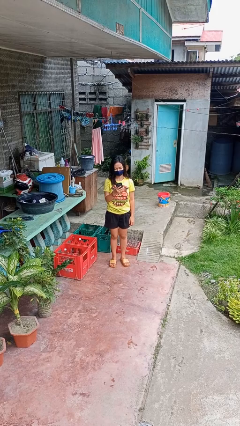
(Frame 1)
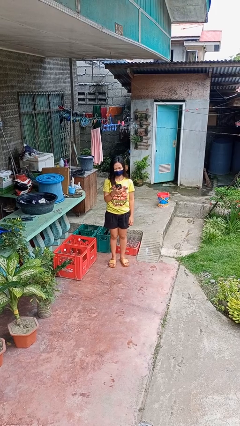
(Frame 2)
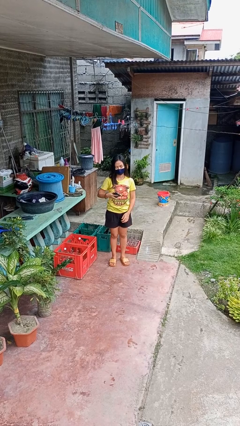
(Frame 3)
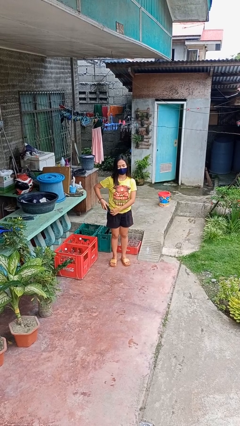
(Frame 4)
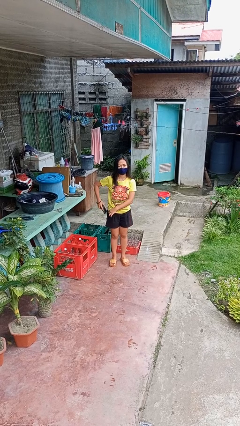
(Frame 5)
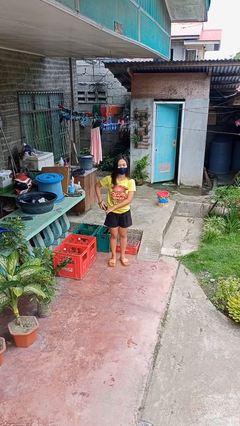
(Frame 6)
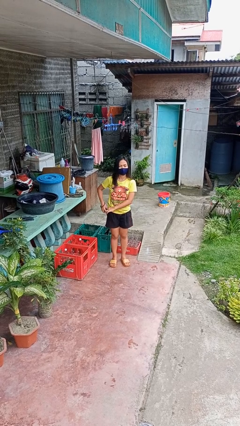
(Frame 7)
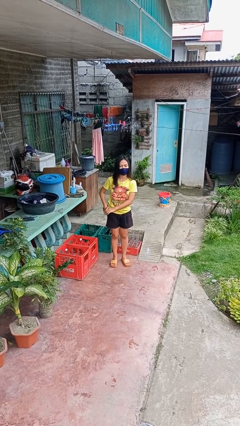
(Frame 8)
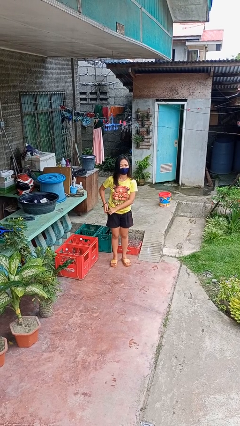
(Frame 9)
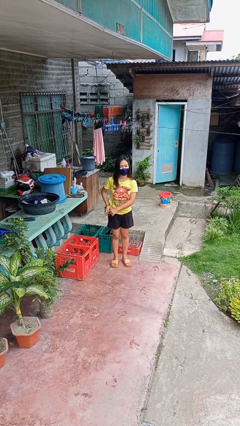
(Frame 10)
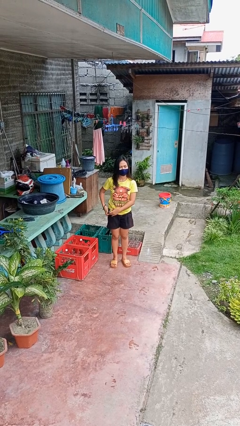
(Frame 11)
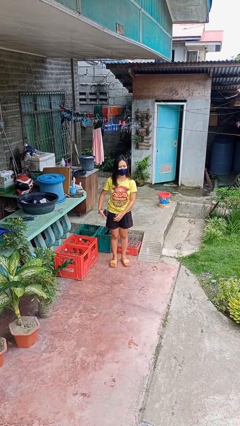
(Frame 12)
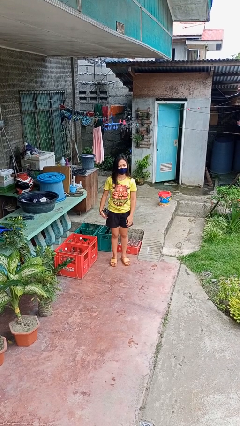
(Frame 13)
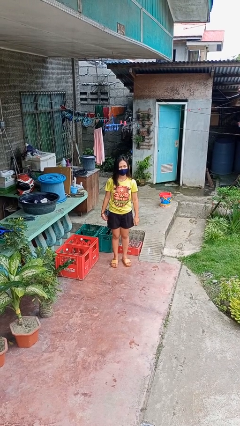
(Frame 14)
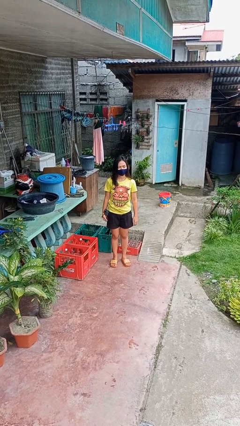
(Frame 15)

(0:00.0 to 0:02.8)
person puts phone into pocket

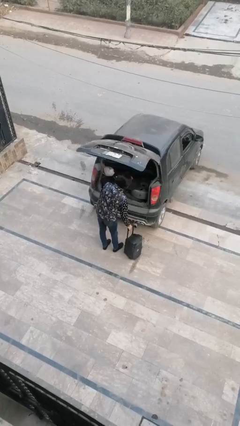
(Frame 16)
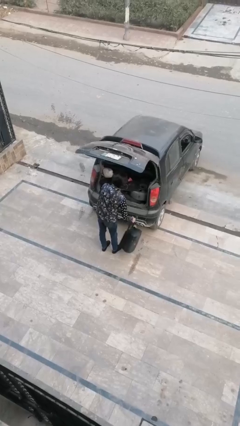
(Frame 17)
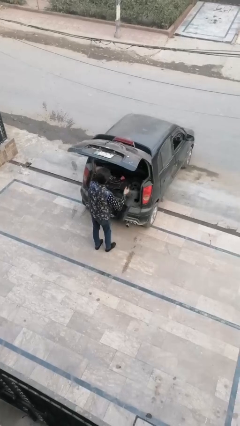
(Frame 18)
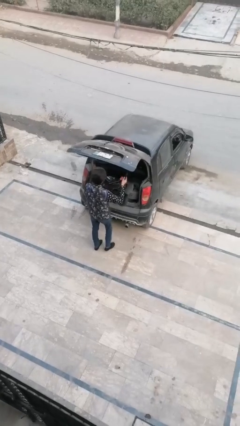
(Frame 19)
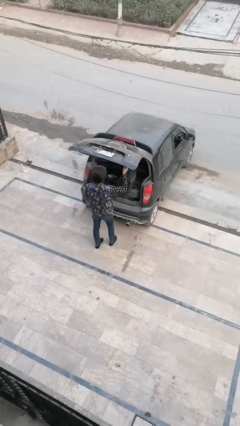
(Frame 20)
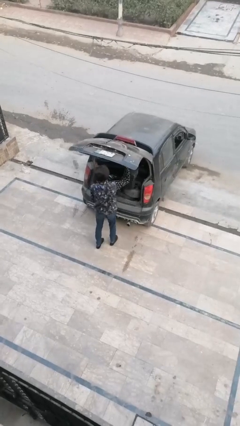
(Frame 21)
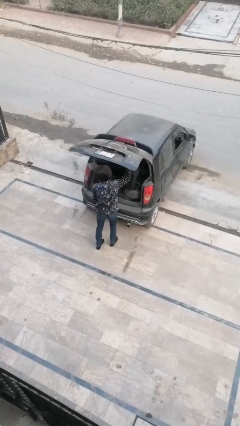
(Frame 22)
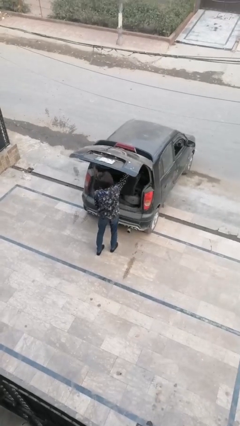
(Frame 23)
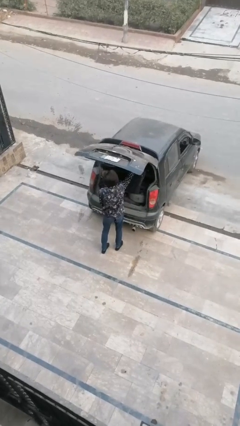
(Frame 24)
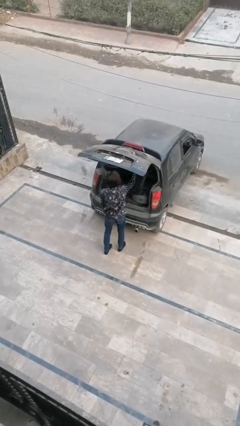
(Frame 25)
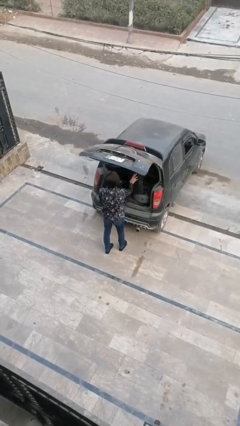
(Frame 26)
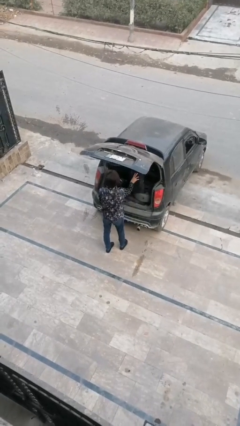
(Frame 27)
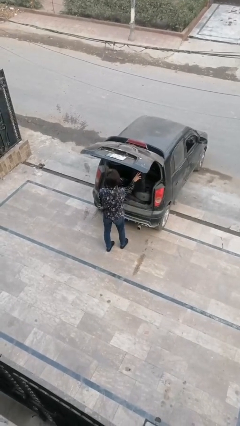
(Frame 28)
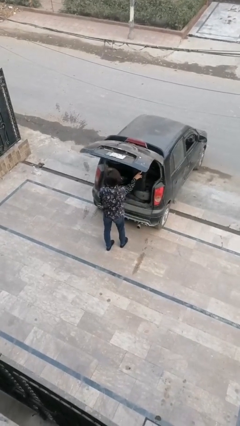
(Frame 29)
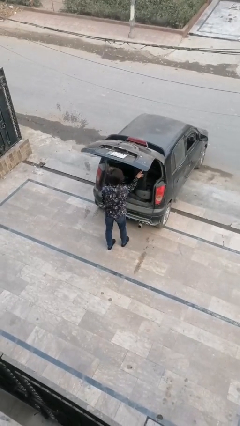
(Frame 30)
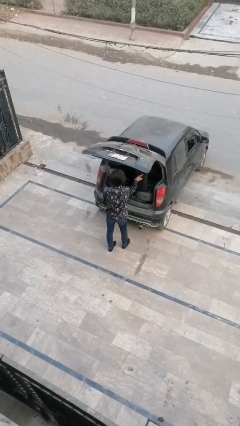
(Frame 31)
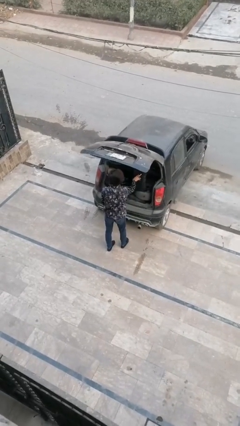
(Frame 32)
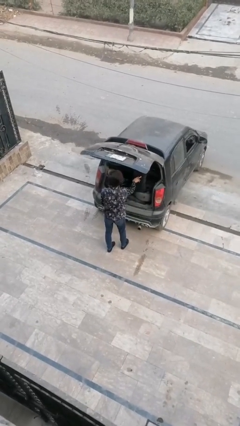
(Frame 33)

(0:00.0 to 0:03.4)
person loads car

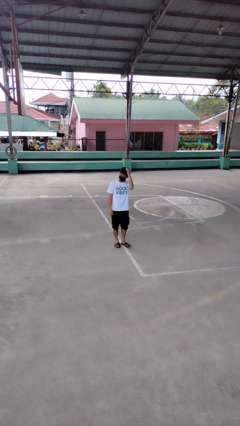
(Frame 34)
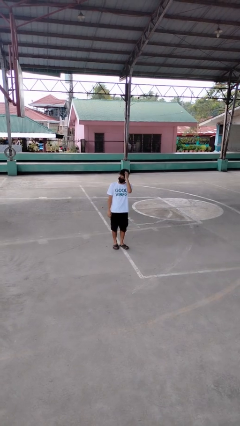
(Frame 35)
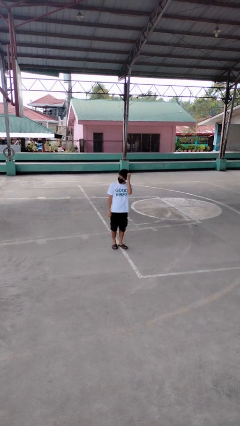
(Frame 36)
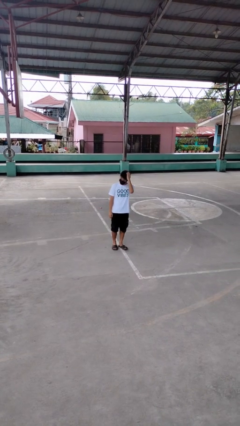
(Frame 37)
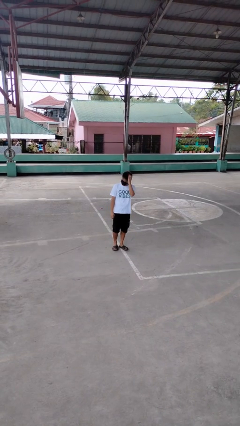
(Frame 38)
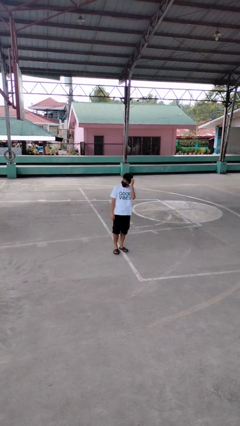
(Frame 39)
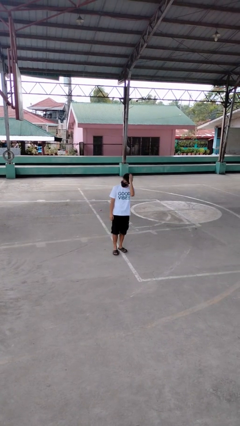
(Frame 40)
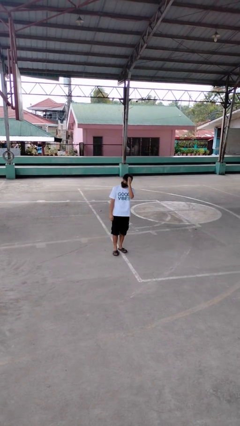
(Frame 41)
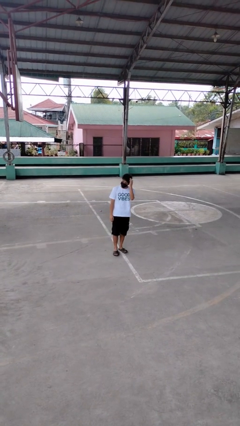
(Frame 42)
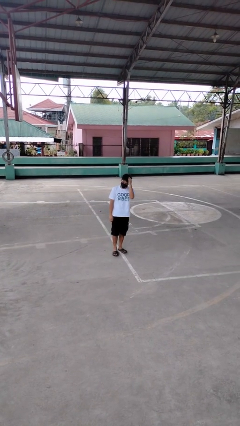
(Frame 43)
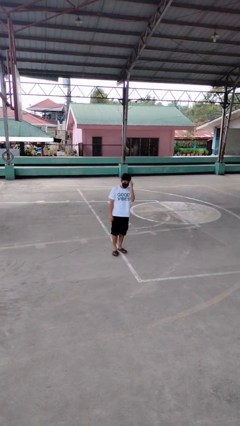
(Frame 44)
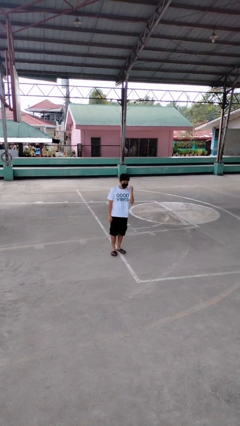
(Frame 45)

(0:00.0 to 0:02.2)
person pats head

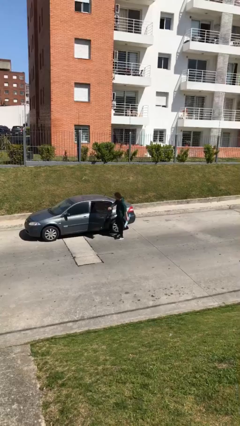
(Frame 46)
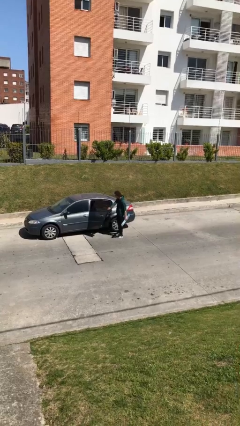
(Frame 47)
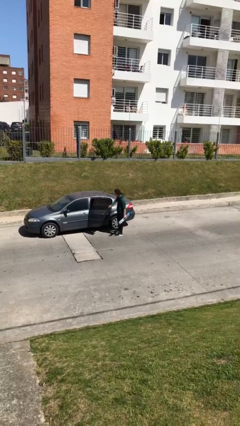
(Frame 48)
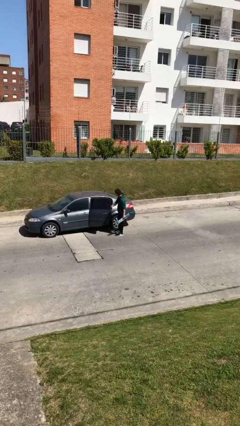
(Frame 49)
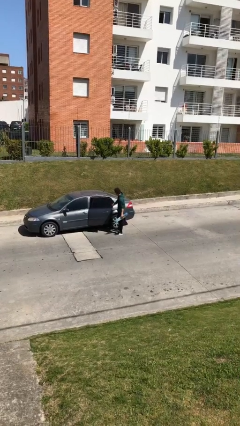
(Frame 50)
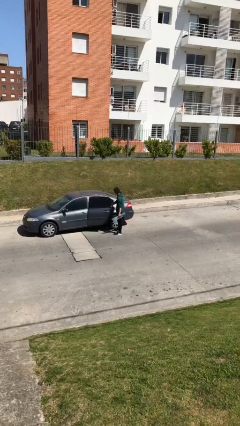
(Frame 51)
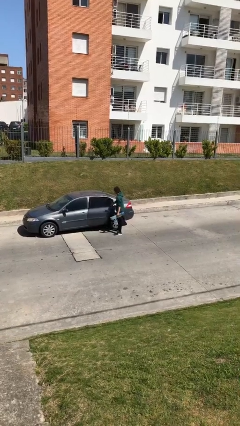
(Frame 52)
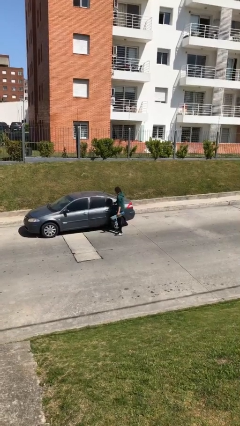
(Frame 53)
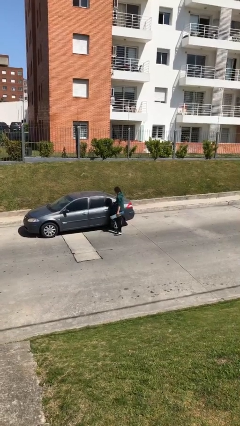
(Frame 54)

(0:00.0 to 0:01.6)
person closes car door

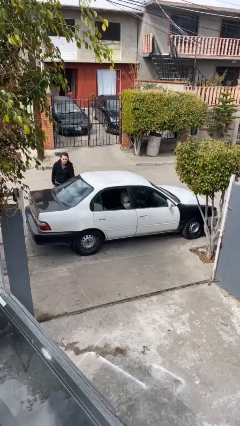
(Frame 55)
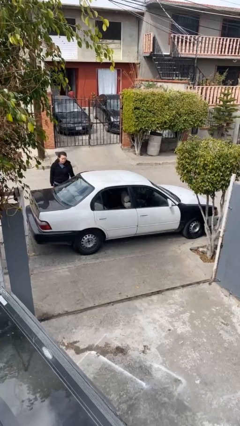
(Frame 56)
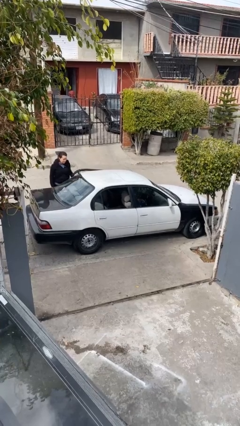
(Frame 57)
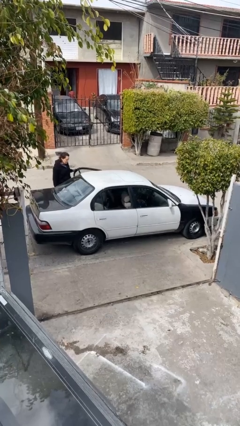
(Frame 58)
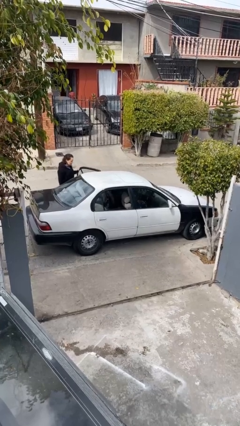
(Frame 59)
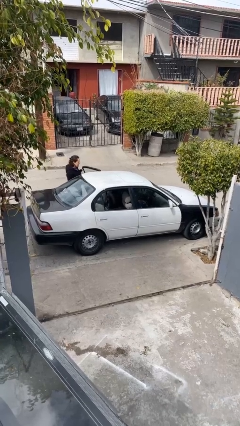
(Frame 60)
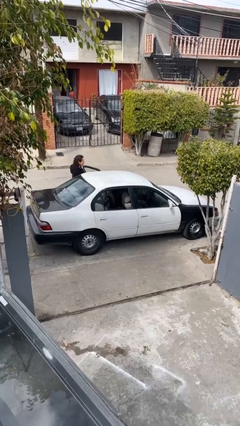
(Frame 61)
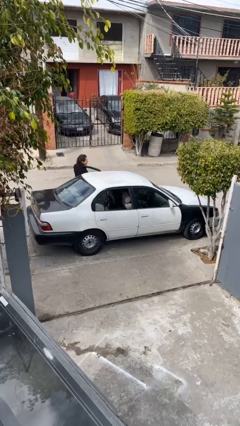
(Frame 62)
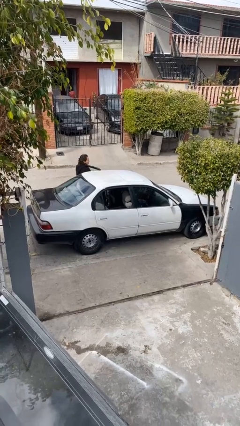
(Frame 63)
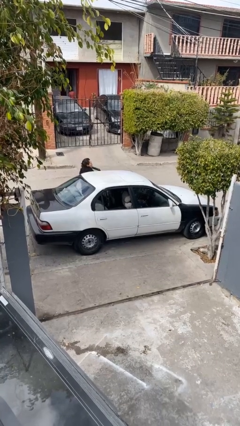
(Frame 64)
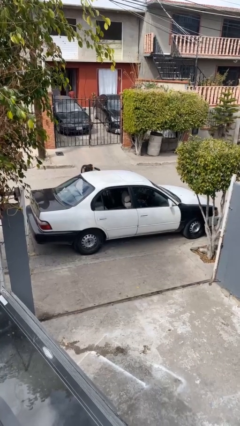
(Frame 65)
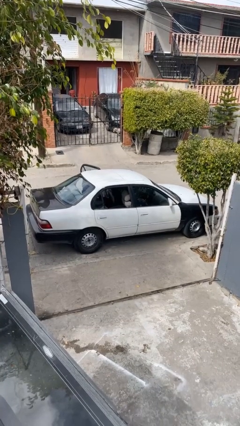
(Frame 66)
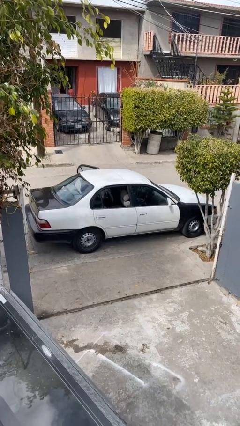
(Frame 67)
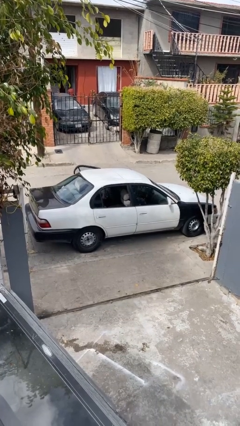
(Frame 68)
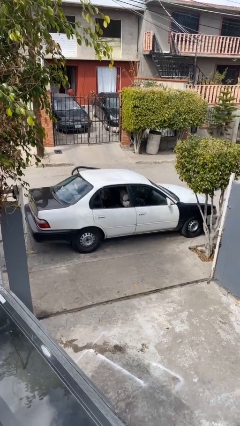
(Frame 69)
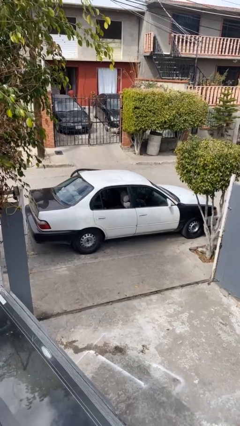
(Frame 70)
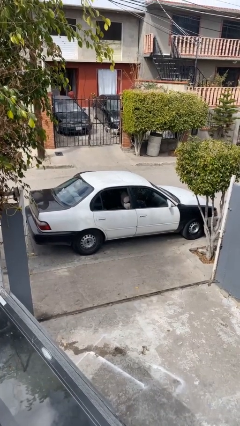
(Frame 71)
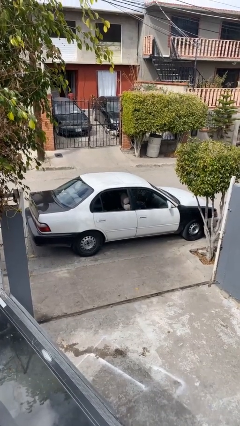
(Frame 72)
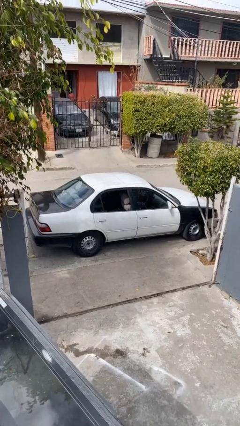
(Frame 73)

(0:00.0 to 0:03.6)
car picks up person

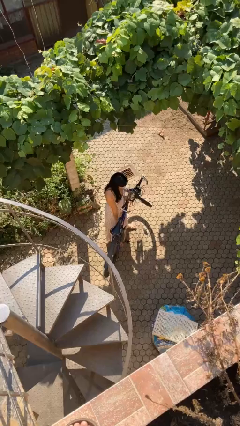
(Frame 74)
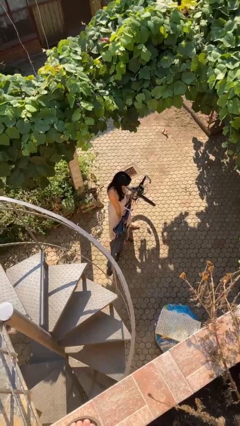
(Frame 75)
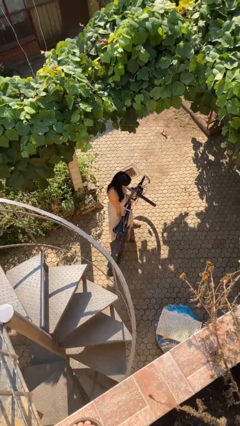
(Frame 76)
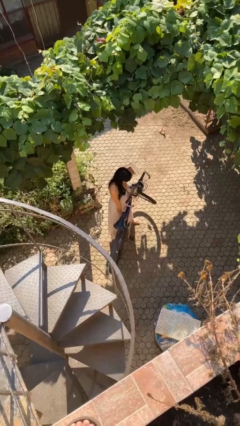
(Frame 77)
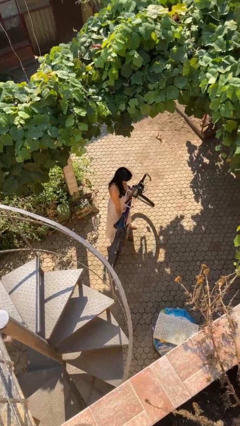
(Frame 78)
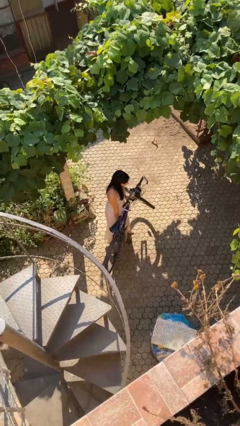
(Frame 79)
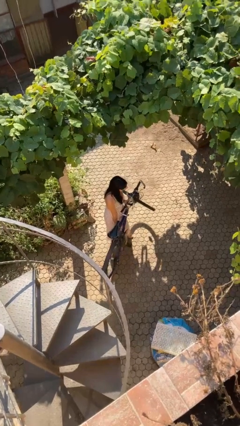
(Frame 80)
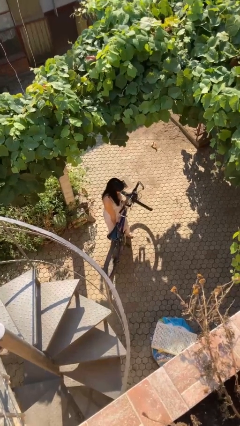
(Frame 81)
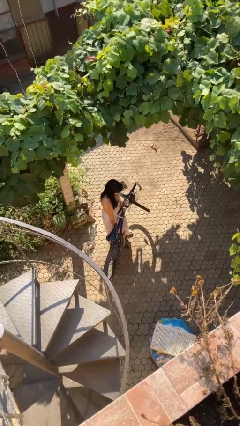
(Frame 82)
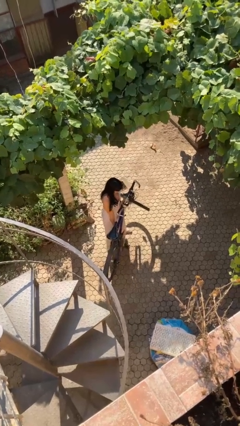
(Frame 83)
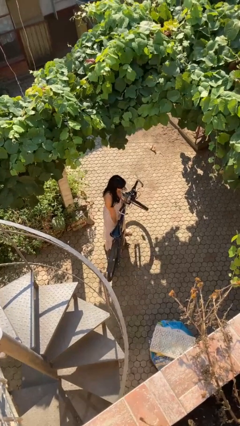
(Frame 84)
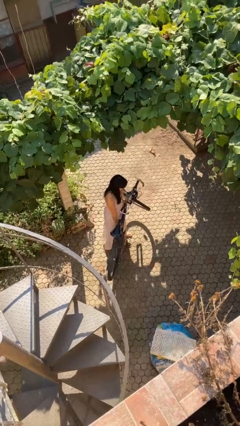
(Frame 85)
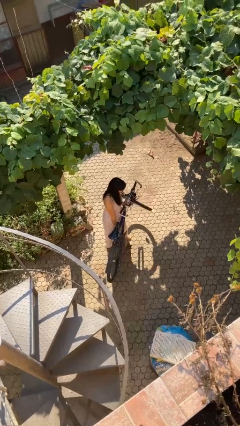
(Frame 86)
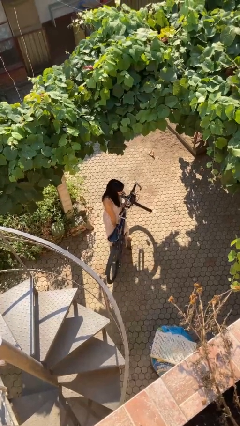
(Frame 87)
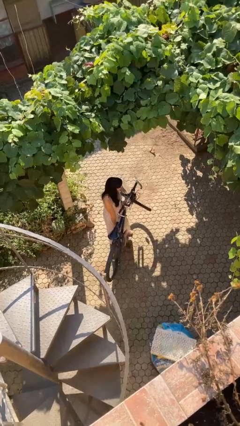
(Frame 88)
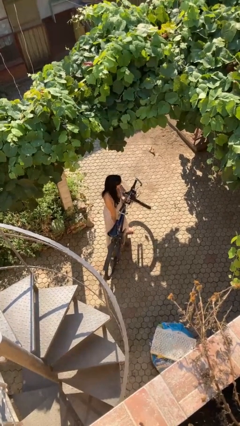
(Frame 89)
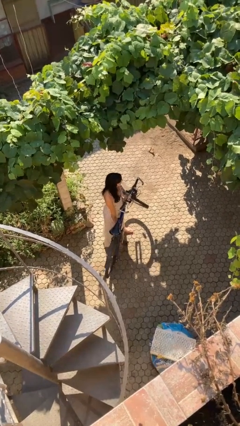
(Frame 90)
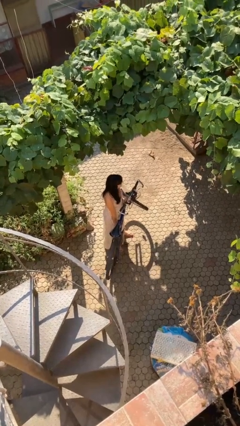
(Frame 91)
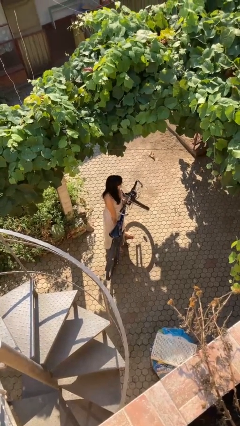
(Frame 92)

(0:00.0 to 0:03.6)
person carries bicycle
